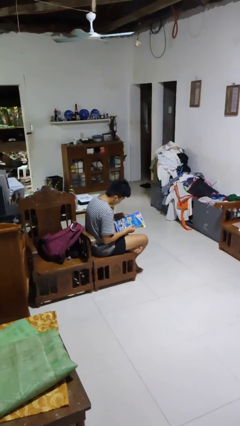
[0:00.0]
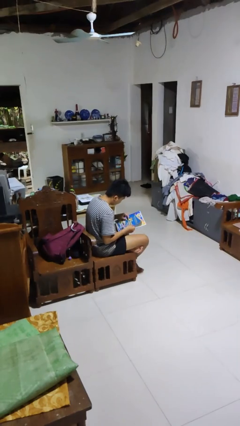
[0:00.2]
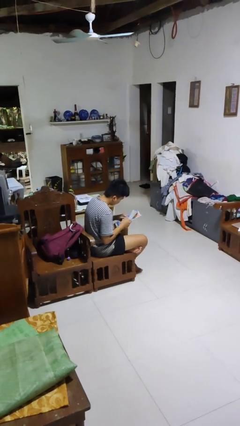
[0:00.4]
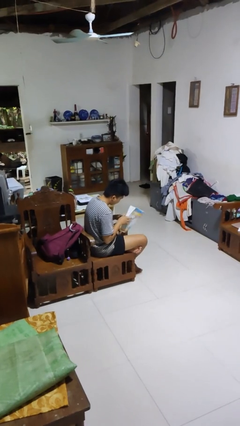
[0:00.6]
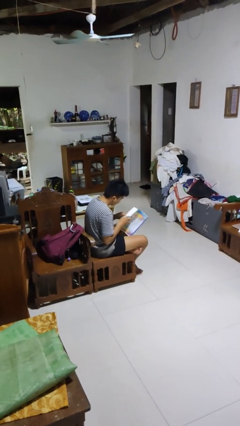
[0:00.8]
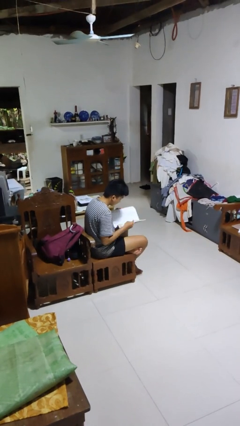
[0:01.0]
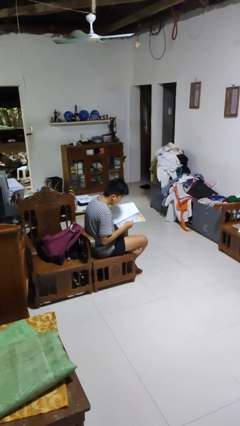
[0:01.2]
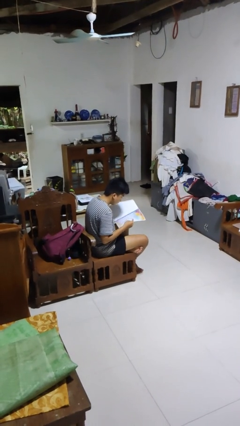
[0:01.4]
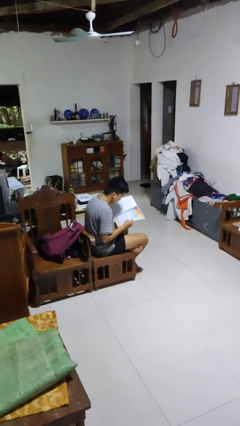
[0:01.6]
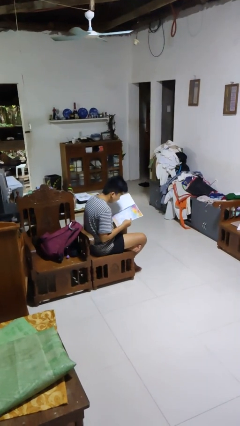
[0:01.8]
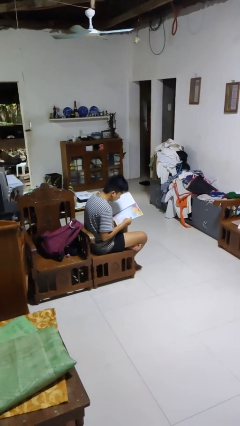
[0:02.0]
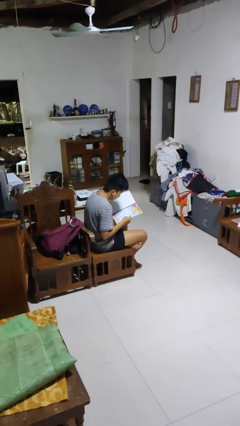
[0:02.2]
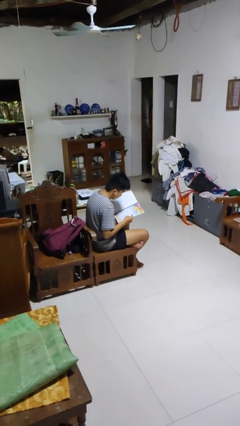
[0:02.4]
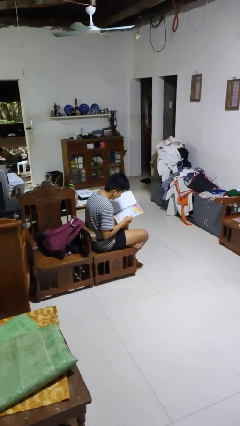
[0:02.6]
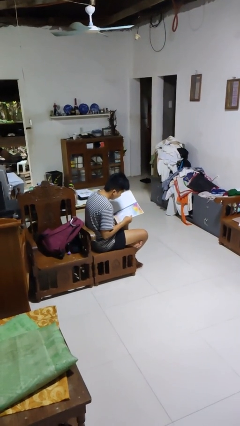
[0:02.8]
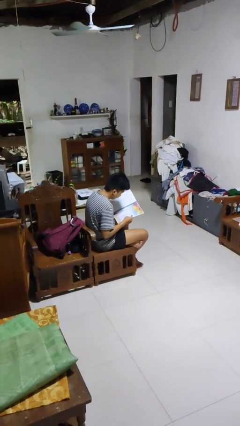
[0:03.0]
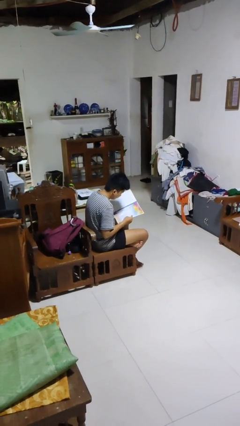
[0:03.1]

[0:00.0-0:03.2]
person reads magazine

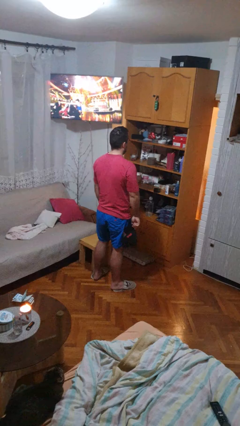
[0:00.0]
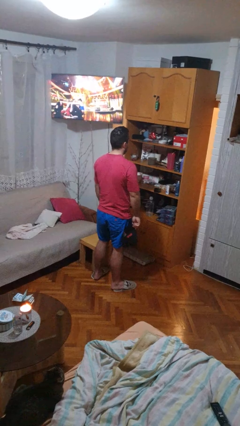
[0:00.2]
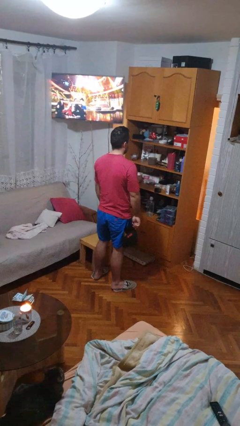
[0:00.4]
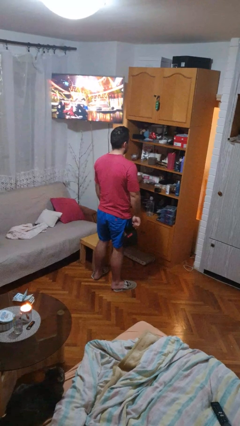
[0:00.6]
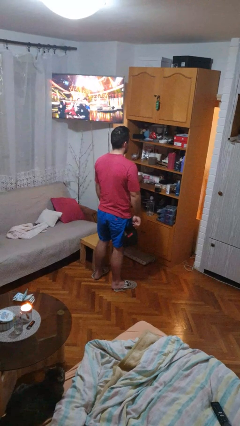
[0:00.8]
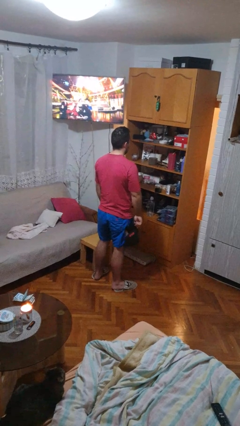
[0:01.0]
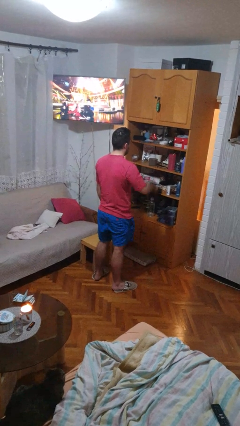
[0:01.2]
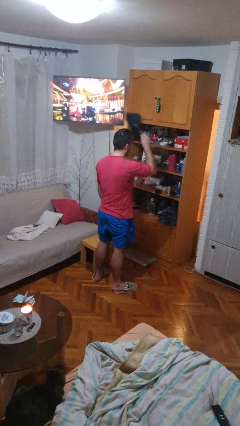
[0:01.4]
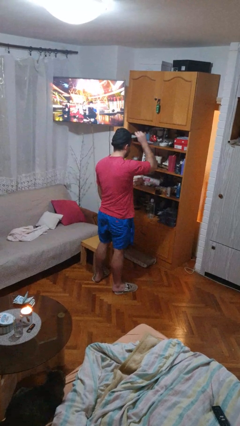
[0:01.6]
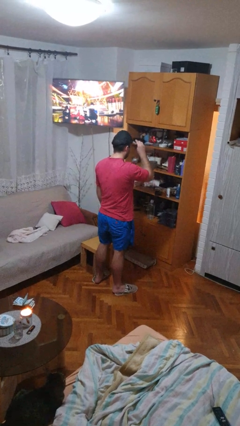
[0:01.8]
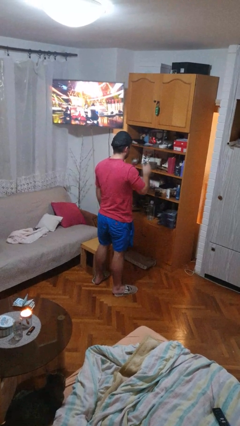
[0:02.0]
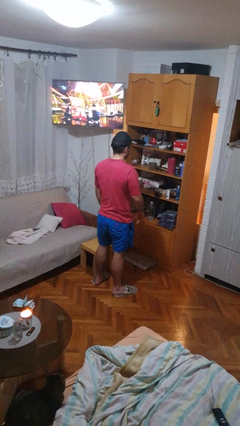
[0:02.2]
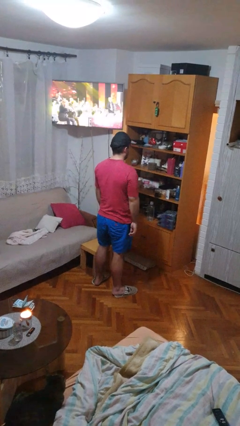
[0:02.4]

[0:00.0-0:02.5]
person puts on hat

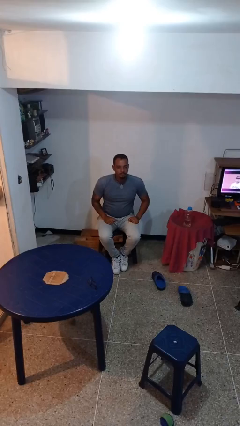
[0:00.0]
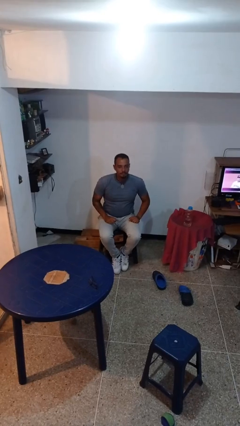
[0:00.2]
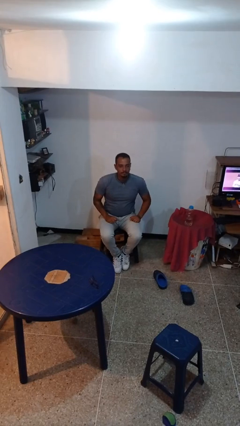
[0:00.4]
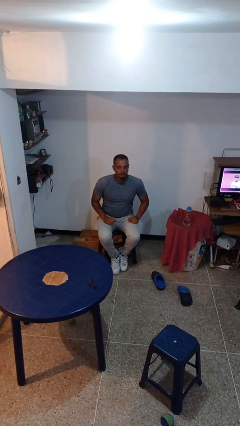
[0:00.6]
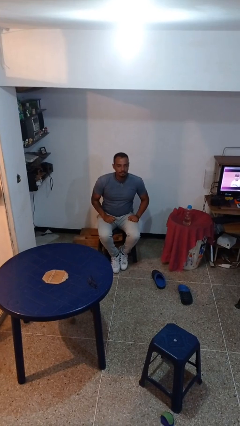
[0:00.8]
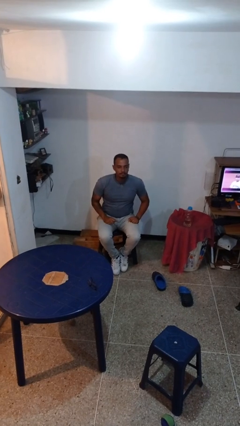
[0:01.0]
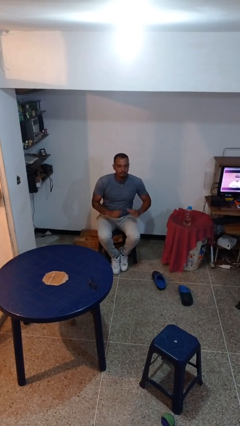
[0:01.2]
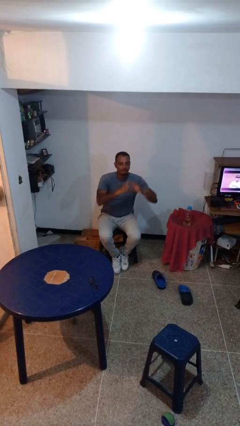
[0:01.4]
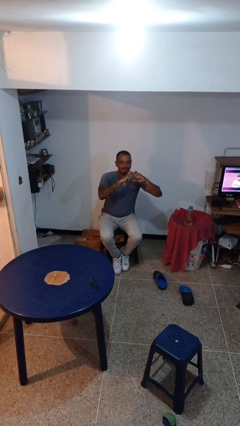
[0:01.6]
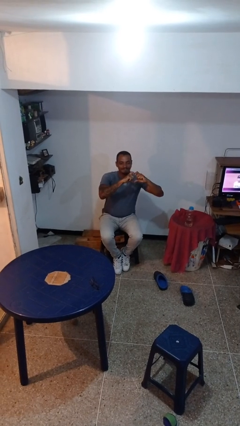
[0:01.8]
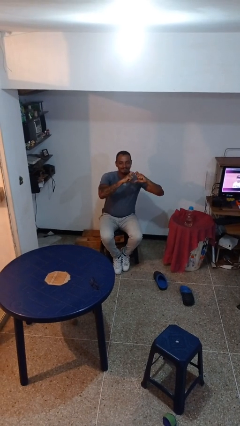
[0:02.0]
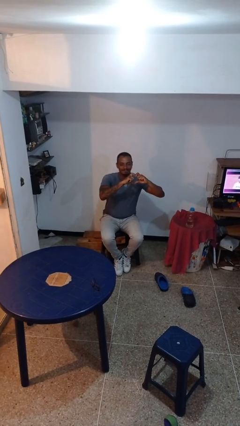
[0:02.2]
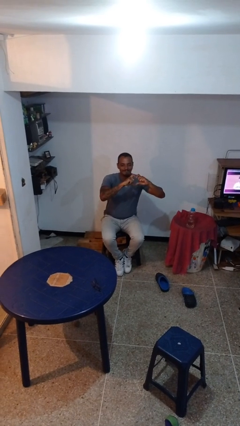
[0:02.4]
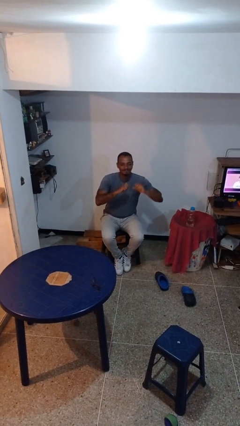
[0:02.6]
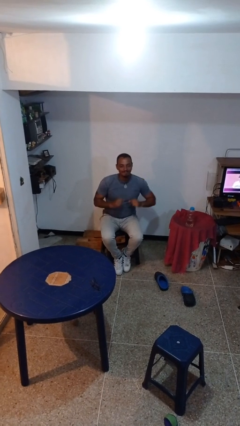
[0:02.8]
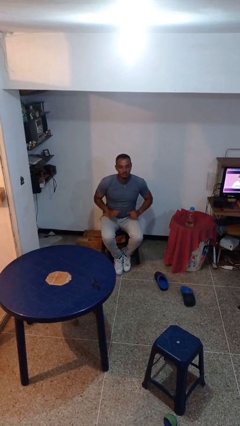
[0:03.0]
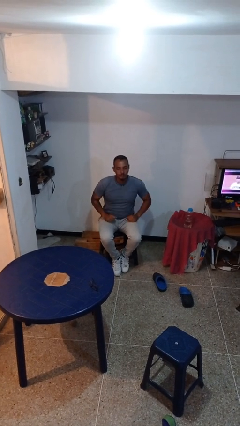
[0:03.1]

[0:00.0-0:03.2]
person gestures heart

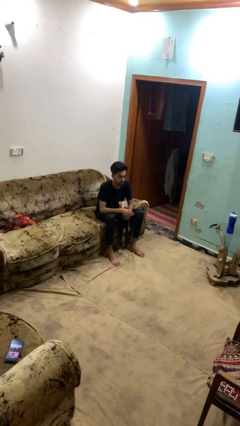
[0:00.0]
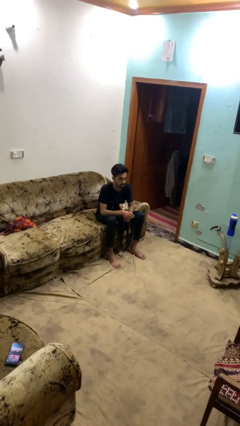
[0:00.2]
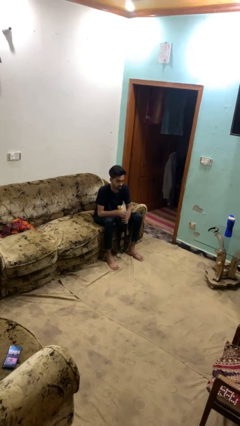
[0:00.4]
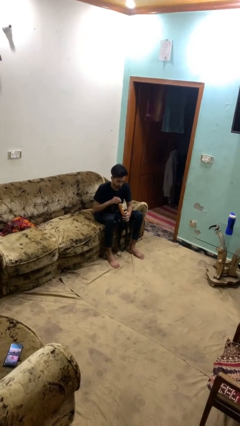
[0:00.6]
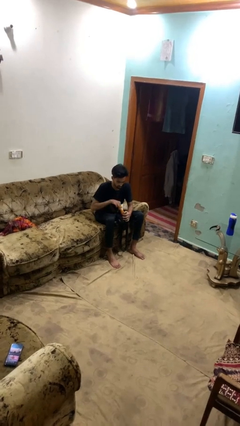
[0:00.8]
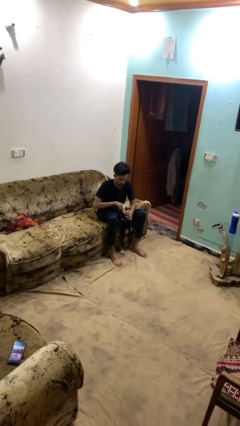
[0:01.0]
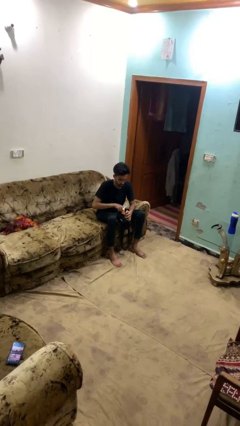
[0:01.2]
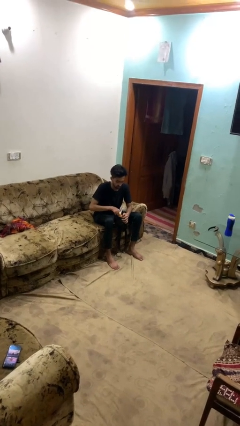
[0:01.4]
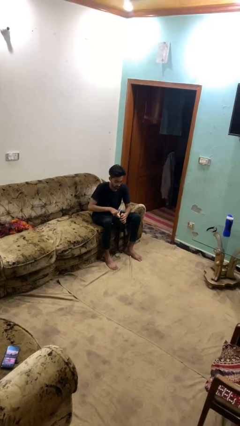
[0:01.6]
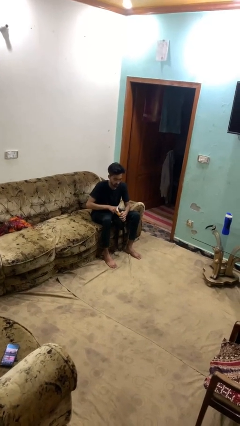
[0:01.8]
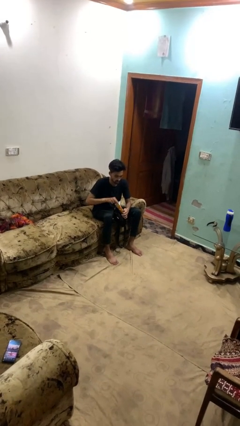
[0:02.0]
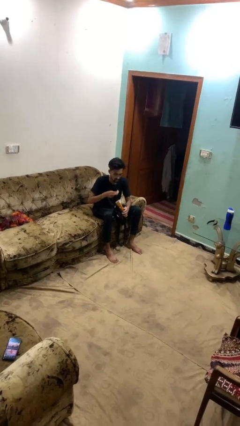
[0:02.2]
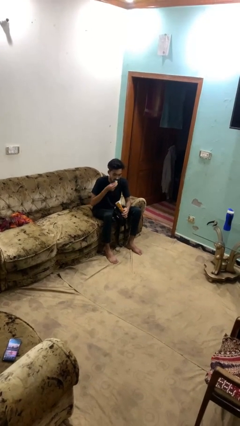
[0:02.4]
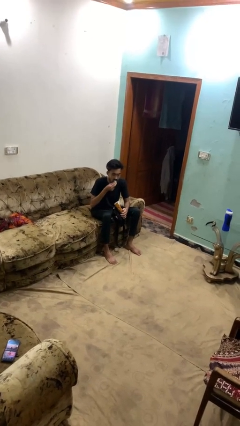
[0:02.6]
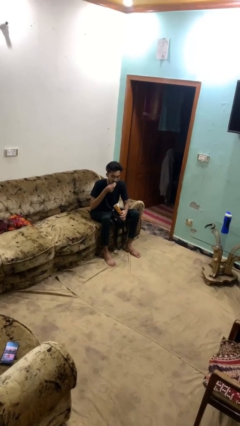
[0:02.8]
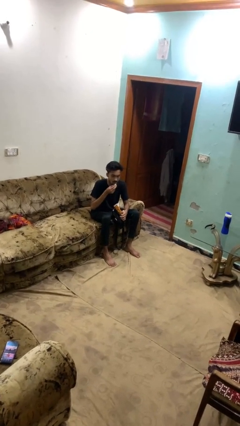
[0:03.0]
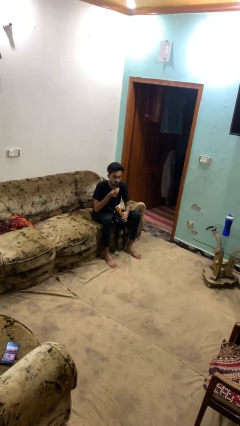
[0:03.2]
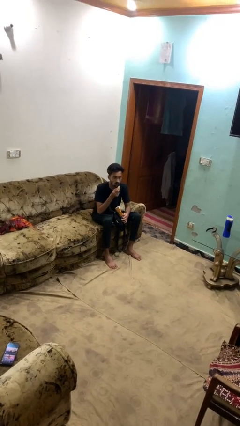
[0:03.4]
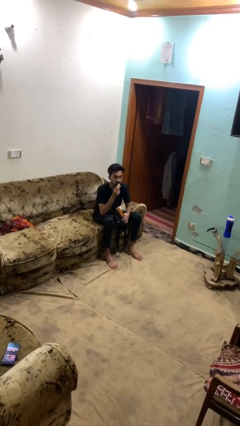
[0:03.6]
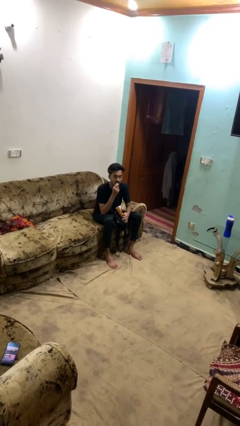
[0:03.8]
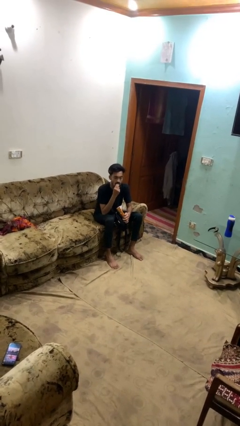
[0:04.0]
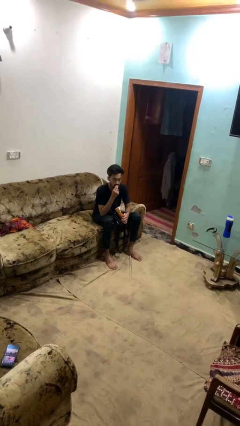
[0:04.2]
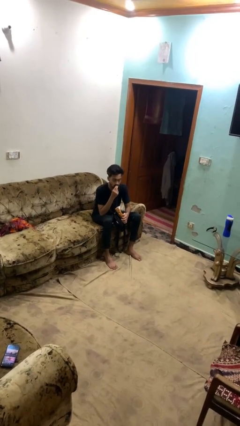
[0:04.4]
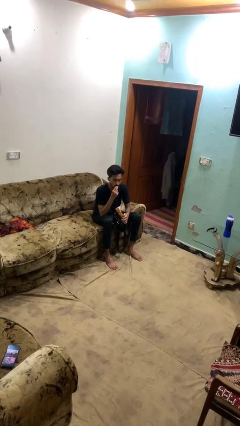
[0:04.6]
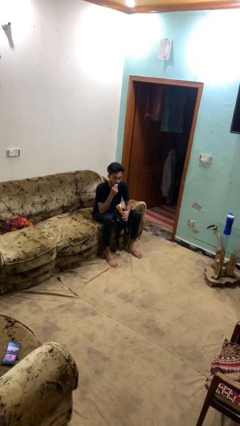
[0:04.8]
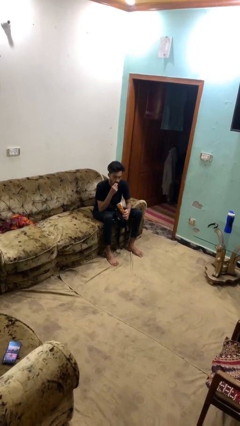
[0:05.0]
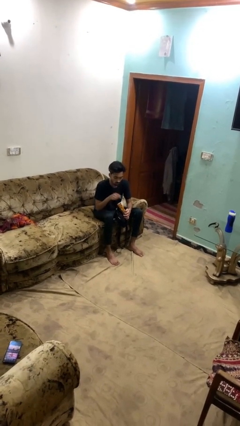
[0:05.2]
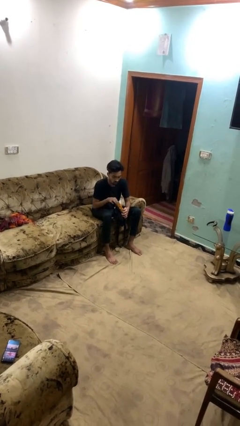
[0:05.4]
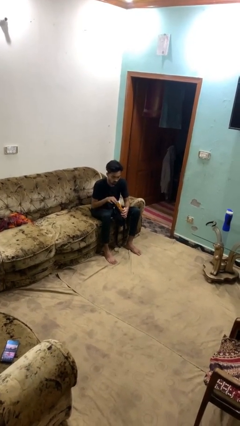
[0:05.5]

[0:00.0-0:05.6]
person eats snack from bag

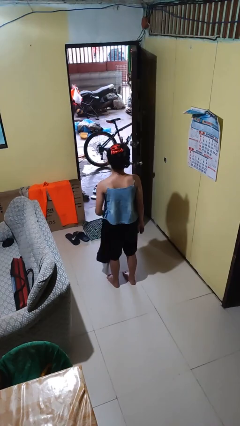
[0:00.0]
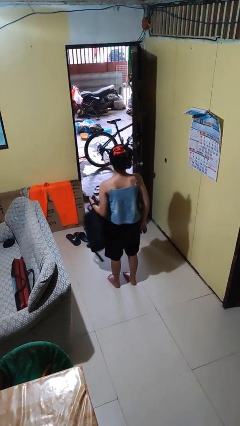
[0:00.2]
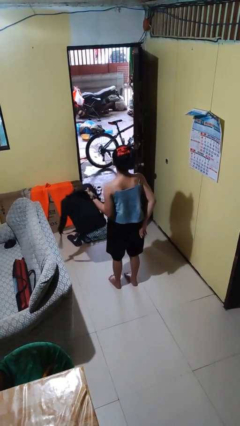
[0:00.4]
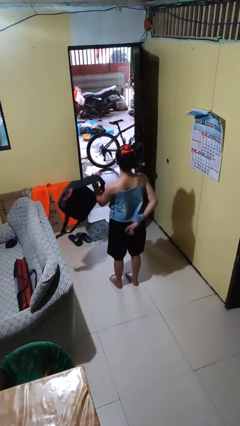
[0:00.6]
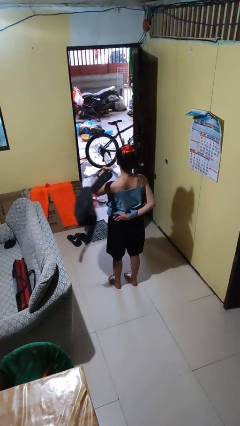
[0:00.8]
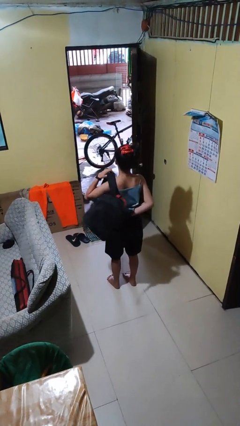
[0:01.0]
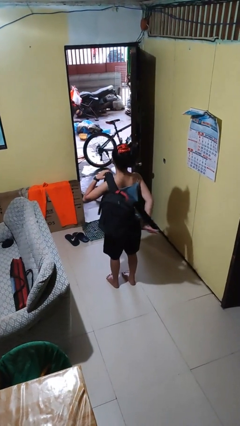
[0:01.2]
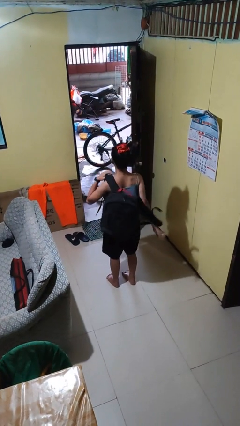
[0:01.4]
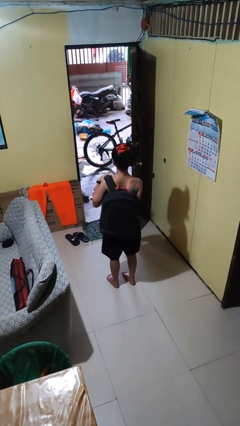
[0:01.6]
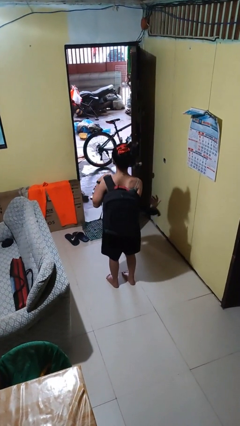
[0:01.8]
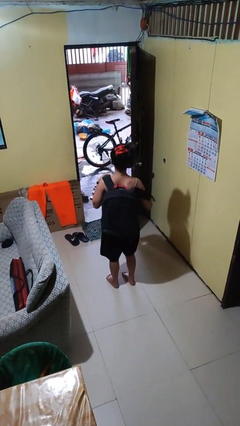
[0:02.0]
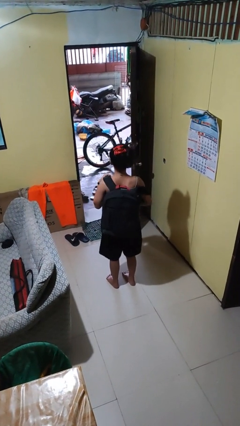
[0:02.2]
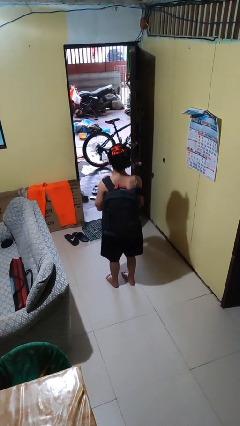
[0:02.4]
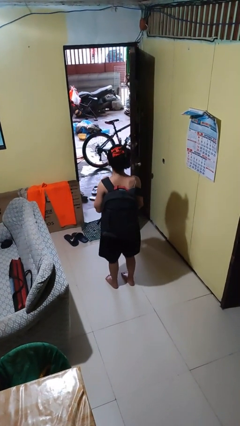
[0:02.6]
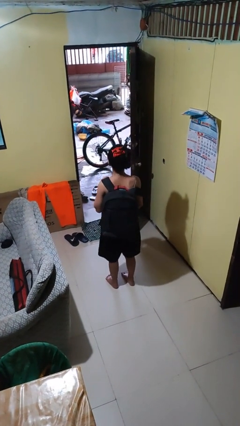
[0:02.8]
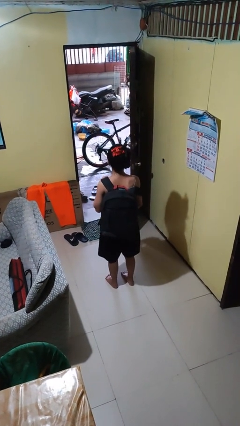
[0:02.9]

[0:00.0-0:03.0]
person puts on backpack
